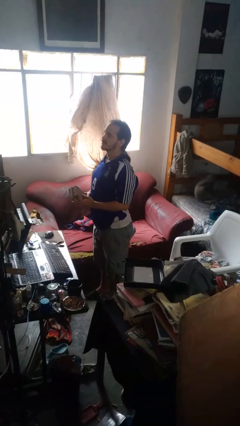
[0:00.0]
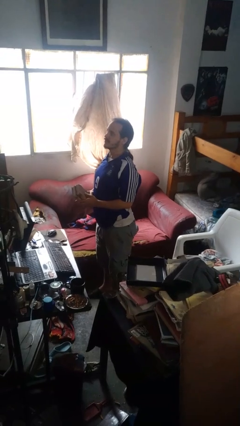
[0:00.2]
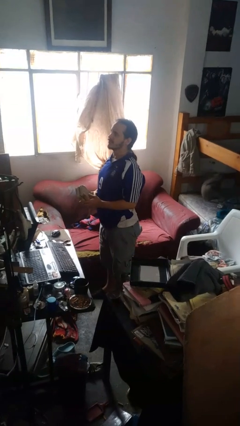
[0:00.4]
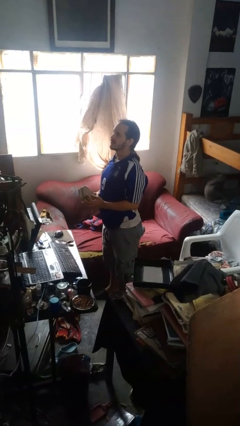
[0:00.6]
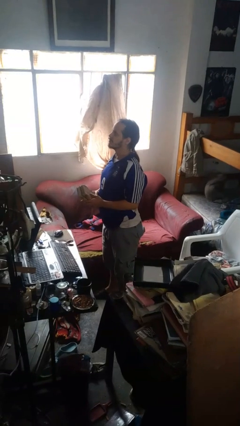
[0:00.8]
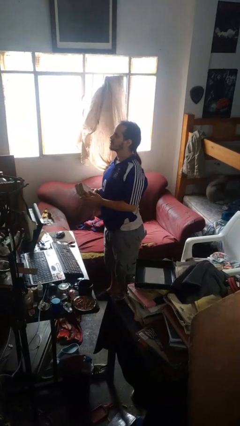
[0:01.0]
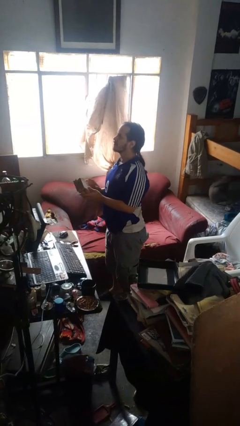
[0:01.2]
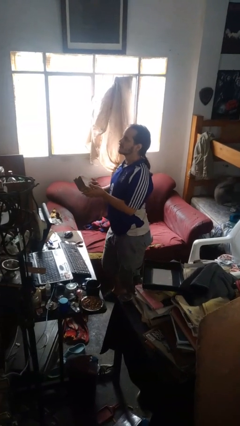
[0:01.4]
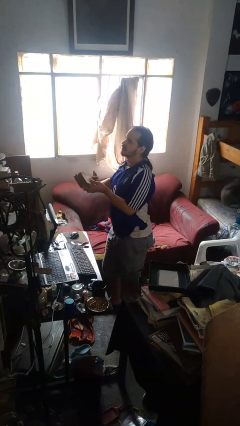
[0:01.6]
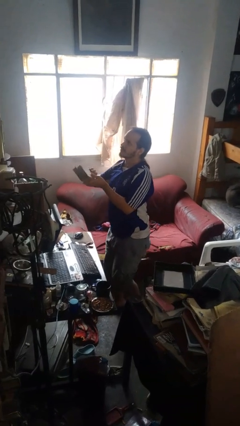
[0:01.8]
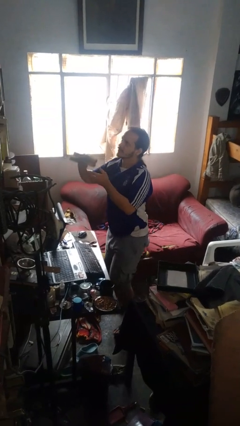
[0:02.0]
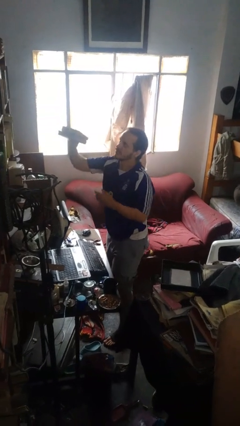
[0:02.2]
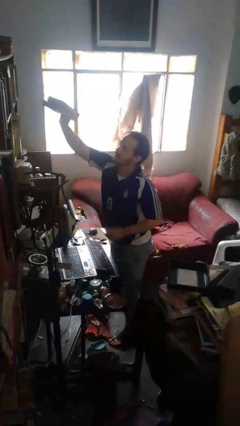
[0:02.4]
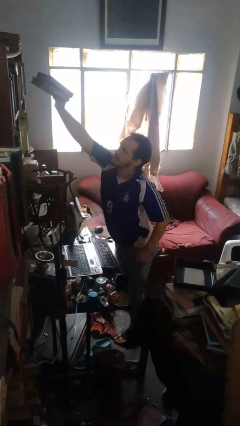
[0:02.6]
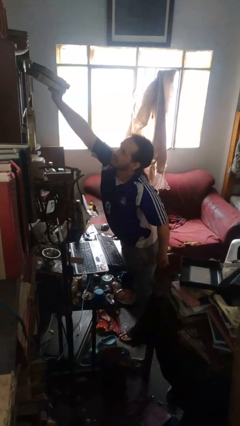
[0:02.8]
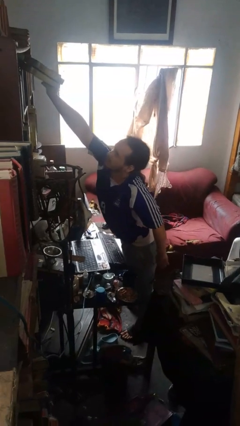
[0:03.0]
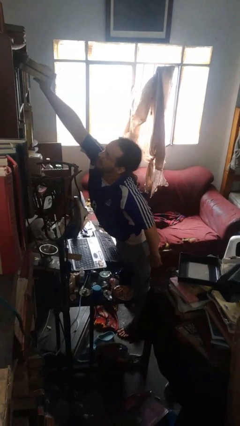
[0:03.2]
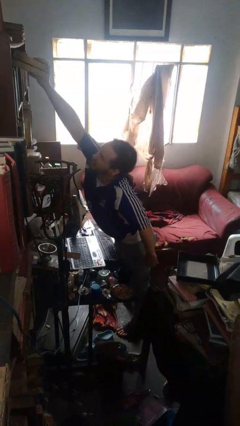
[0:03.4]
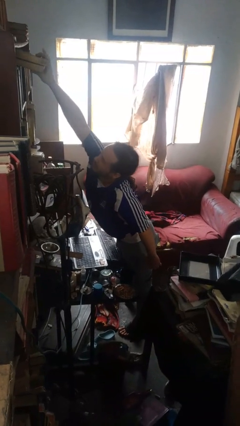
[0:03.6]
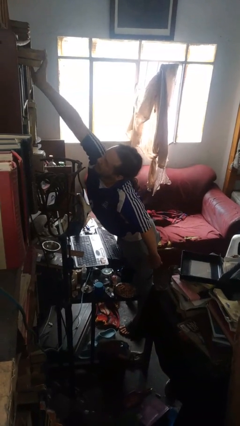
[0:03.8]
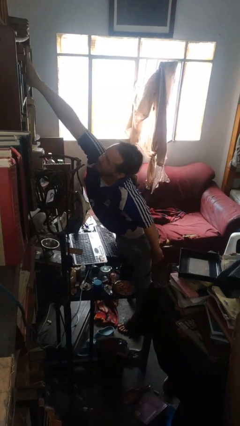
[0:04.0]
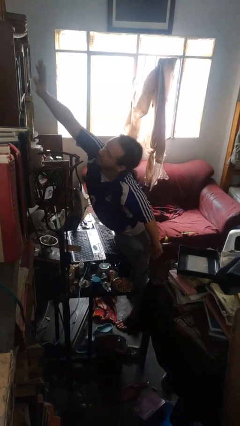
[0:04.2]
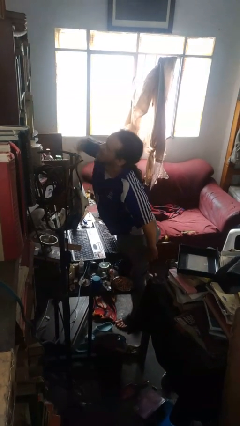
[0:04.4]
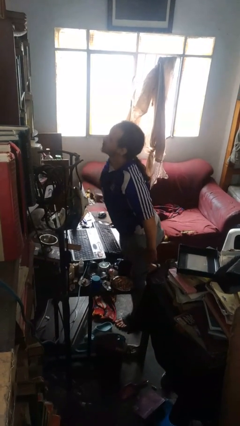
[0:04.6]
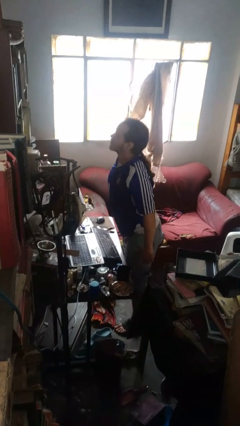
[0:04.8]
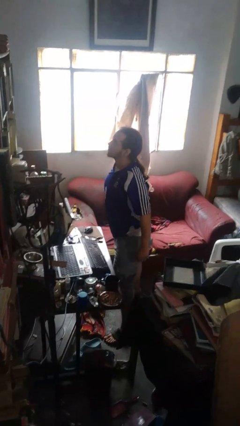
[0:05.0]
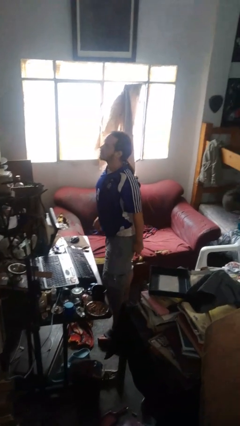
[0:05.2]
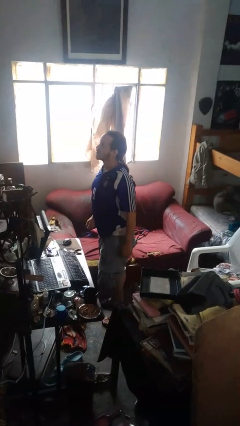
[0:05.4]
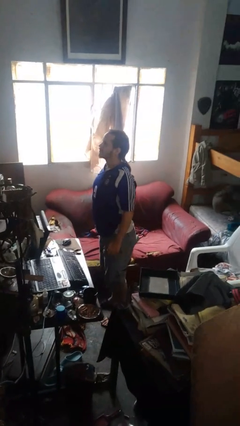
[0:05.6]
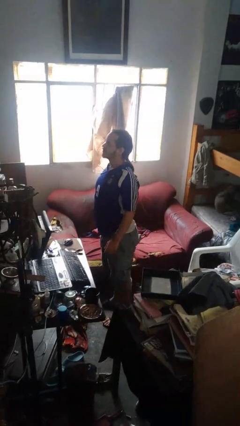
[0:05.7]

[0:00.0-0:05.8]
person puts down object on shelf

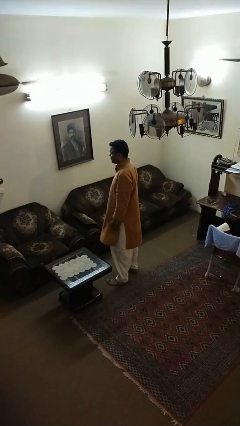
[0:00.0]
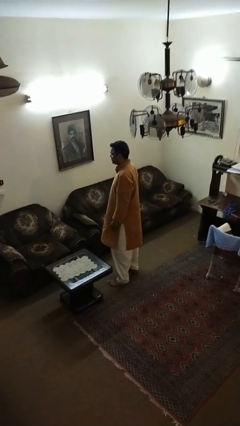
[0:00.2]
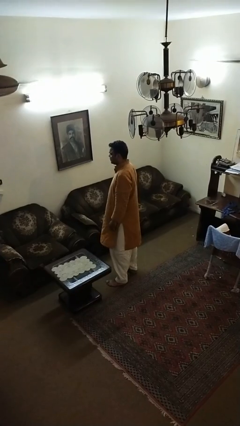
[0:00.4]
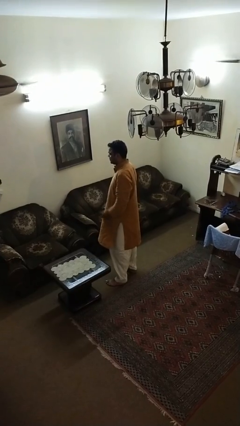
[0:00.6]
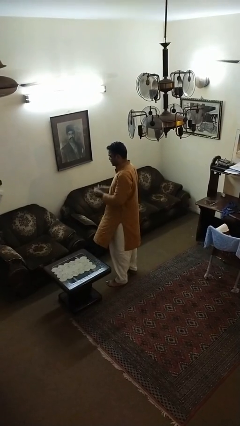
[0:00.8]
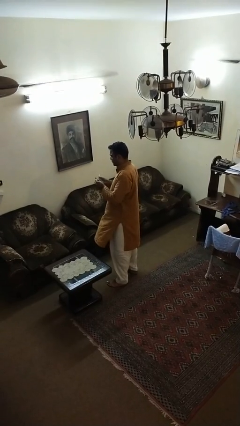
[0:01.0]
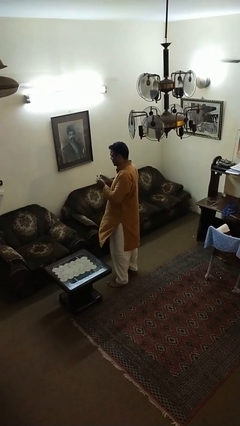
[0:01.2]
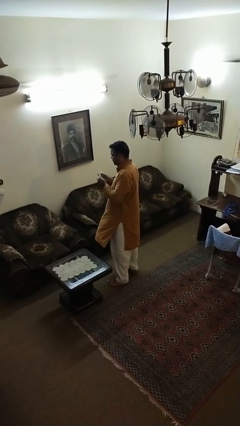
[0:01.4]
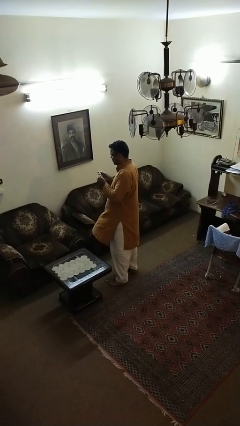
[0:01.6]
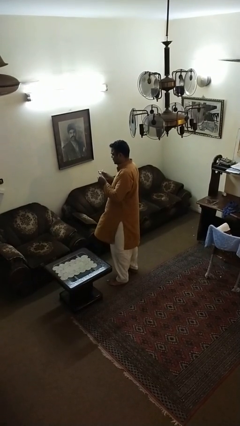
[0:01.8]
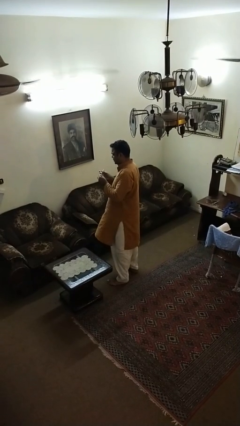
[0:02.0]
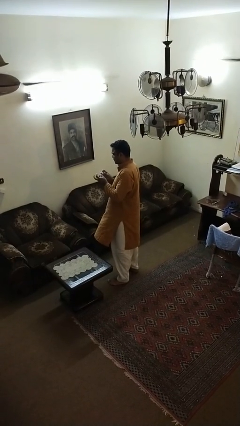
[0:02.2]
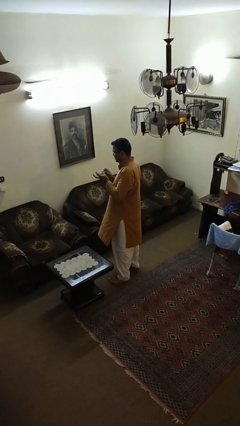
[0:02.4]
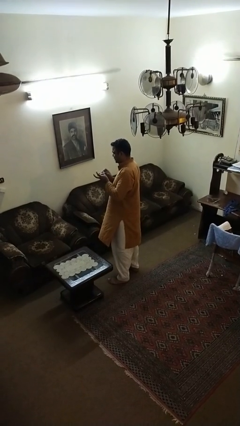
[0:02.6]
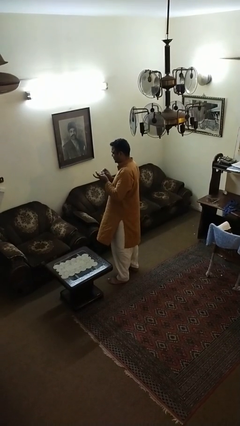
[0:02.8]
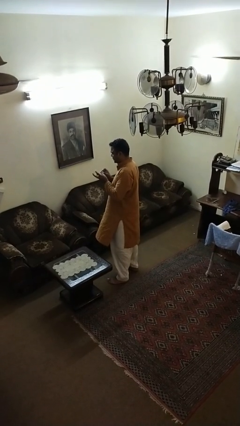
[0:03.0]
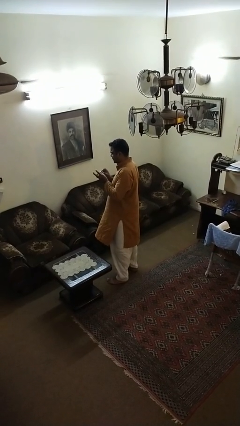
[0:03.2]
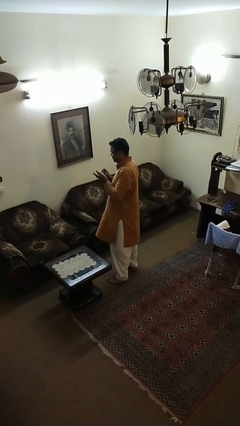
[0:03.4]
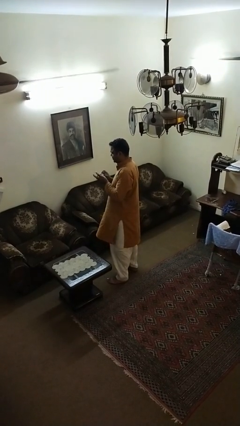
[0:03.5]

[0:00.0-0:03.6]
person clips fingernails

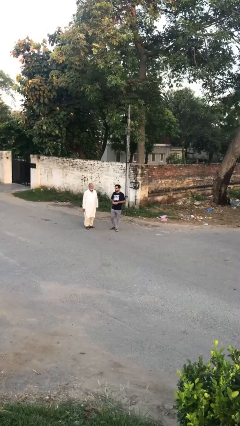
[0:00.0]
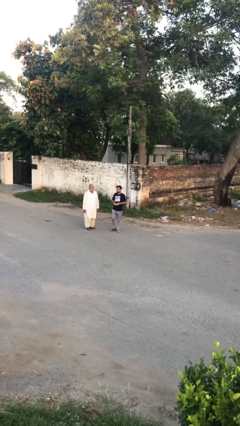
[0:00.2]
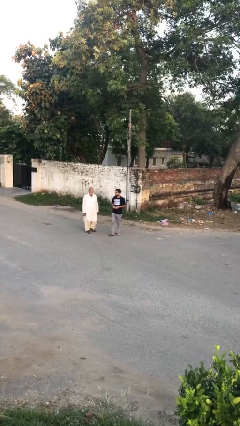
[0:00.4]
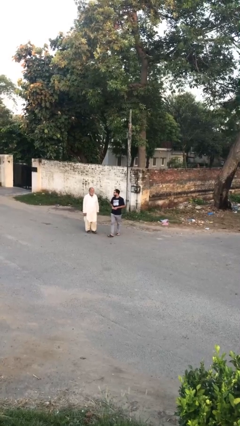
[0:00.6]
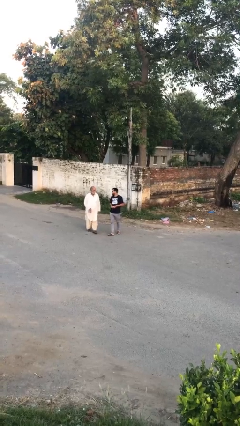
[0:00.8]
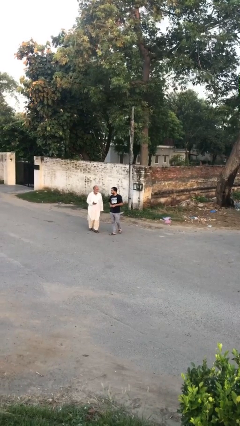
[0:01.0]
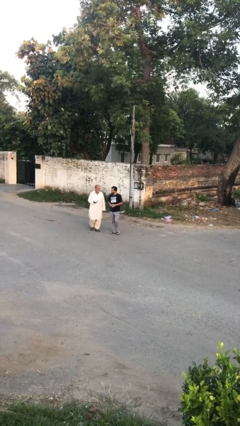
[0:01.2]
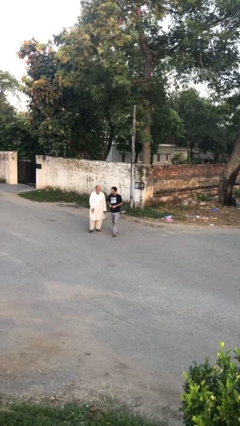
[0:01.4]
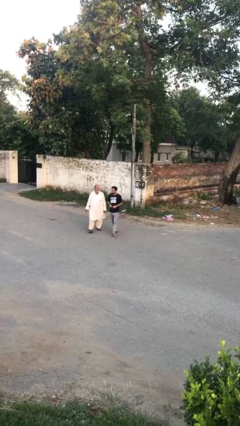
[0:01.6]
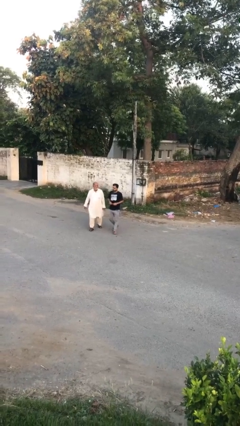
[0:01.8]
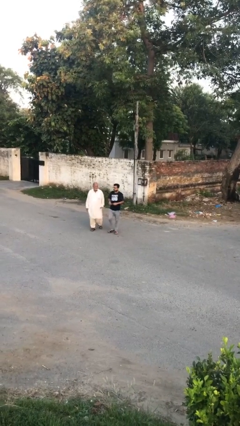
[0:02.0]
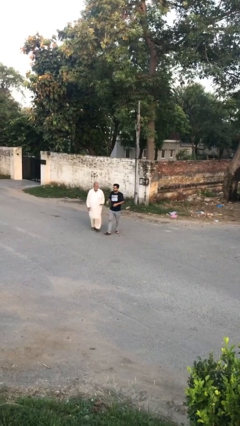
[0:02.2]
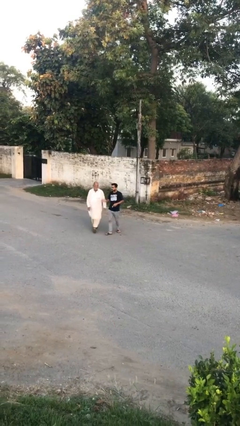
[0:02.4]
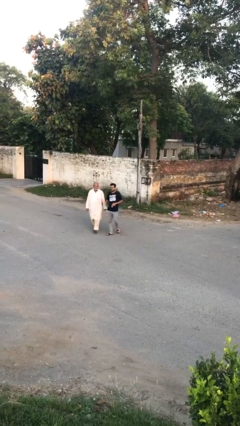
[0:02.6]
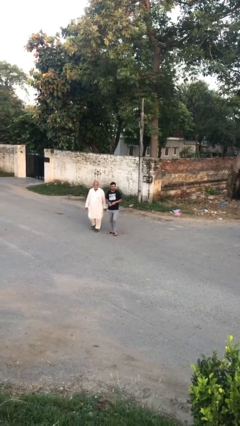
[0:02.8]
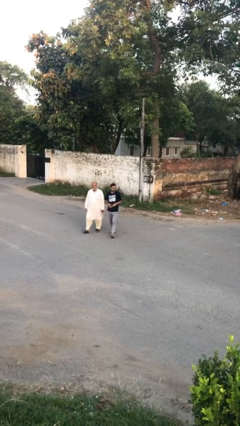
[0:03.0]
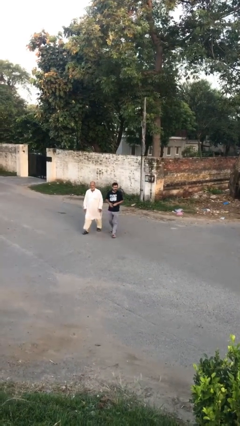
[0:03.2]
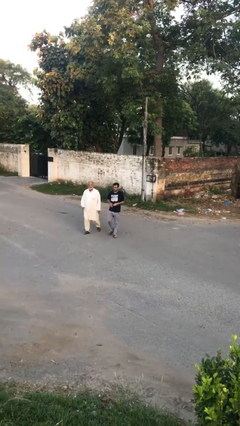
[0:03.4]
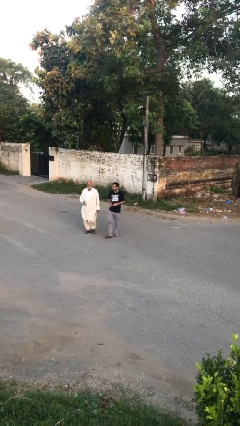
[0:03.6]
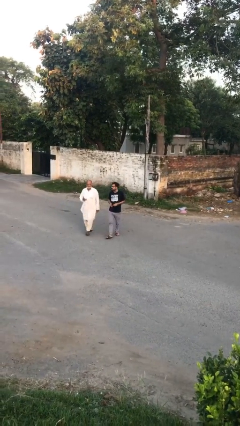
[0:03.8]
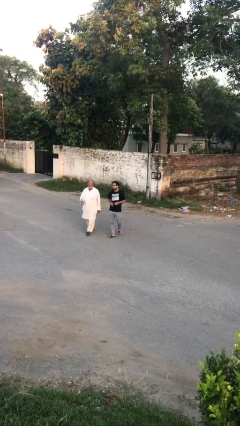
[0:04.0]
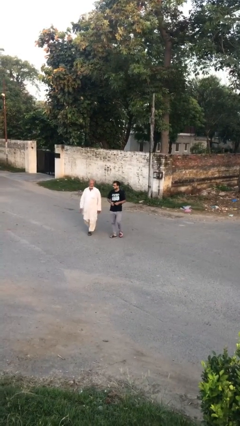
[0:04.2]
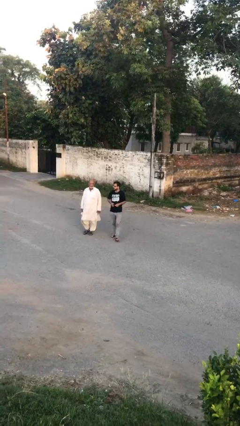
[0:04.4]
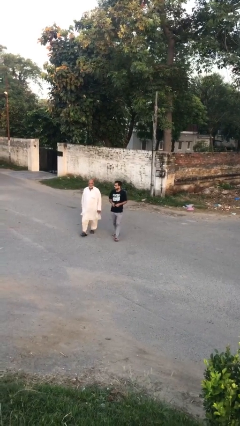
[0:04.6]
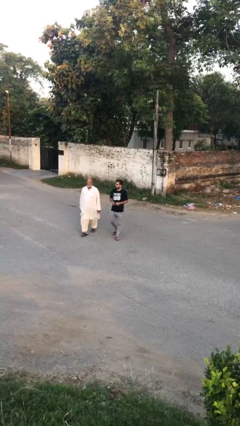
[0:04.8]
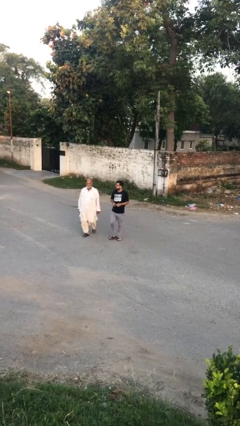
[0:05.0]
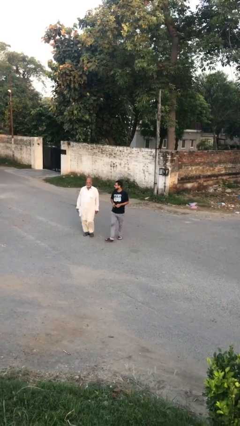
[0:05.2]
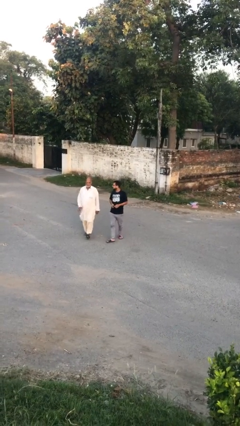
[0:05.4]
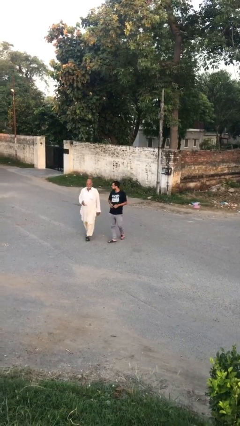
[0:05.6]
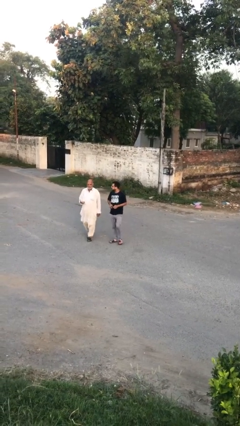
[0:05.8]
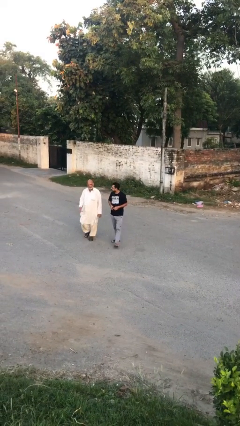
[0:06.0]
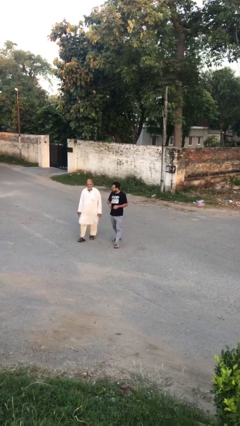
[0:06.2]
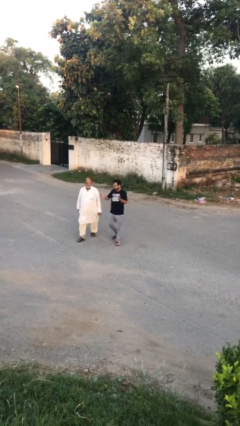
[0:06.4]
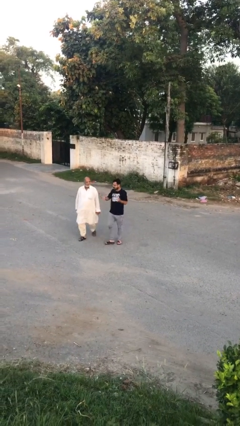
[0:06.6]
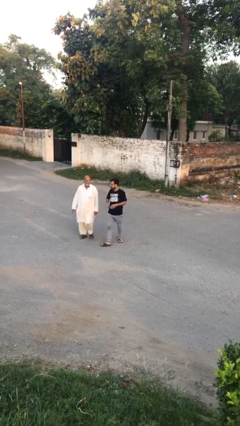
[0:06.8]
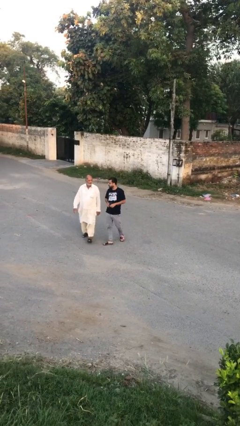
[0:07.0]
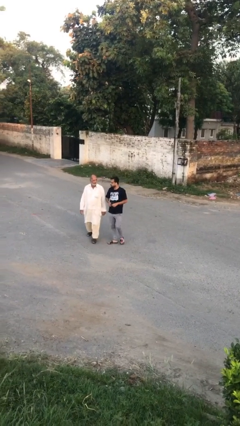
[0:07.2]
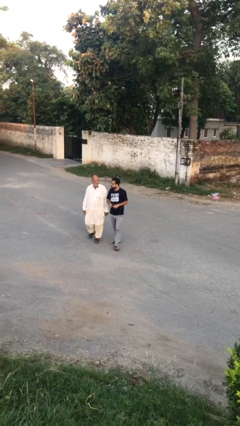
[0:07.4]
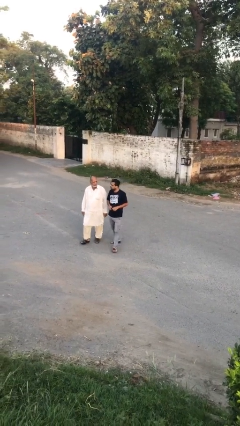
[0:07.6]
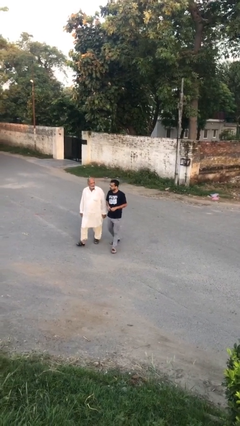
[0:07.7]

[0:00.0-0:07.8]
person talks to person

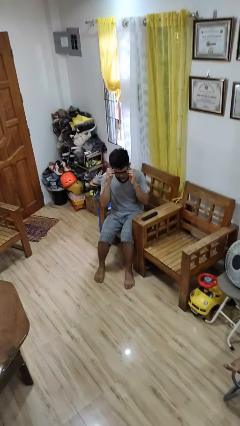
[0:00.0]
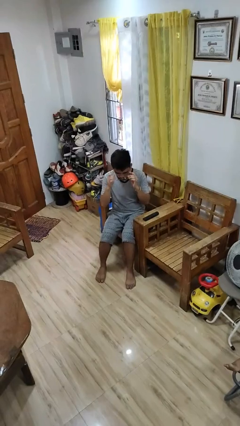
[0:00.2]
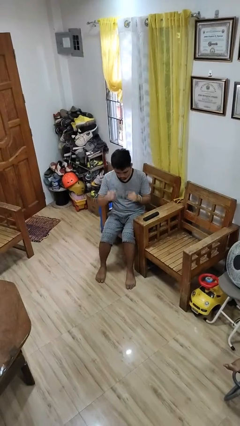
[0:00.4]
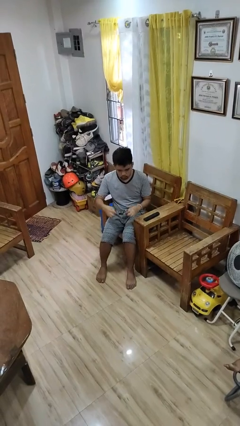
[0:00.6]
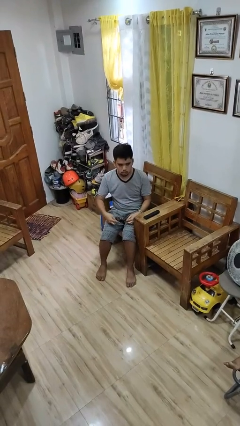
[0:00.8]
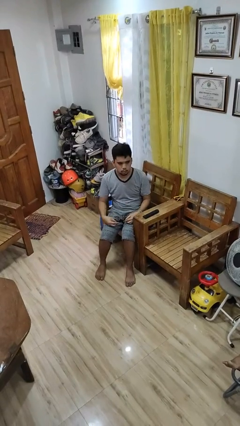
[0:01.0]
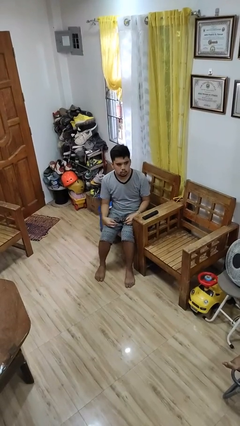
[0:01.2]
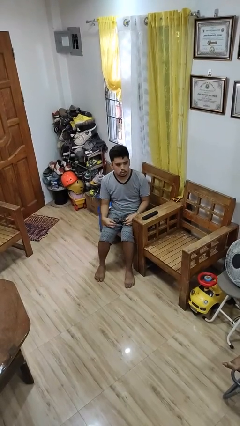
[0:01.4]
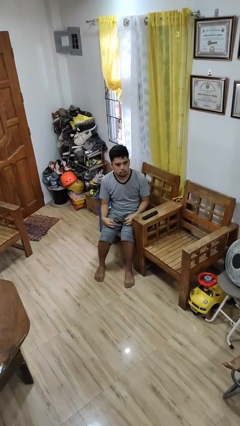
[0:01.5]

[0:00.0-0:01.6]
person takes off glasses
